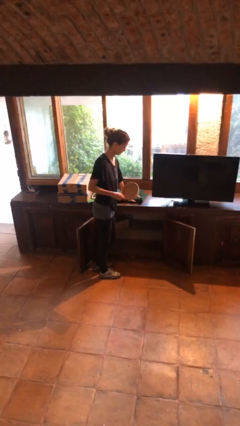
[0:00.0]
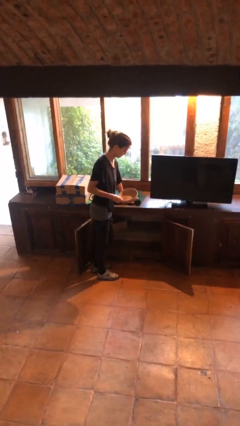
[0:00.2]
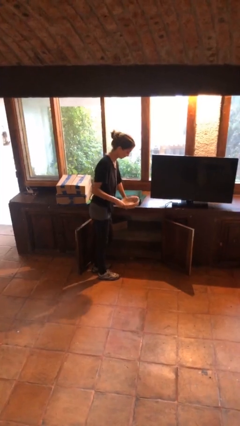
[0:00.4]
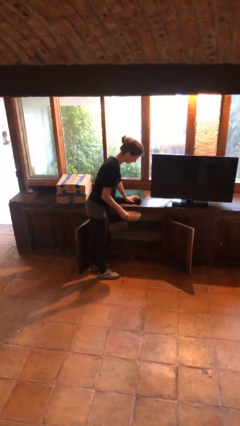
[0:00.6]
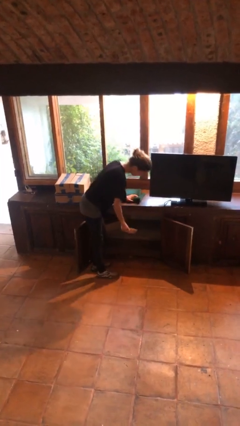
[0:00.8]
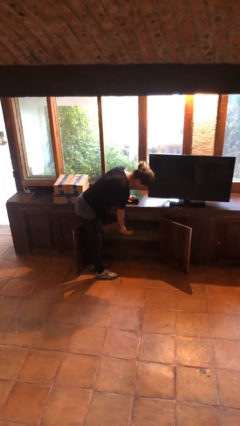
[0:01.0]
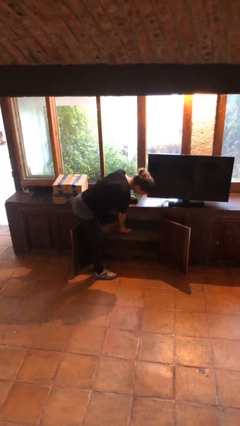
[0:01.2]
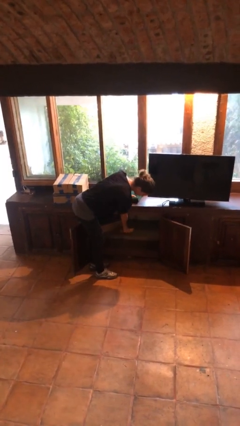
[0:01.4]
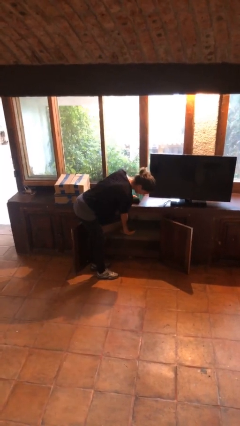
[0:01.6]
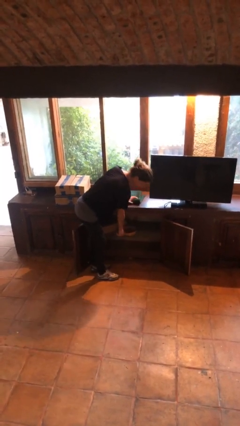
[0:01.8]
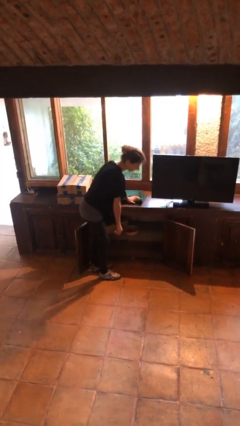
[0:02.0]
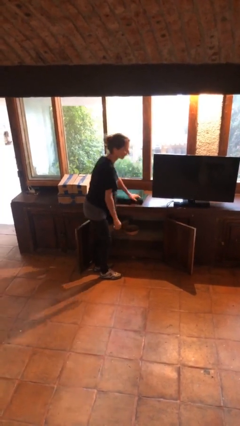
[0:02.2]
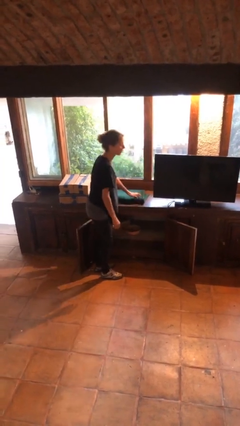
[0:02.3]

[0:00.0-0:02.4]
person puts down object into cabinet

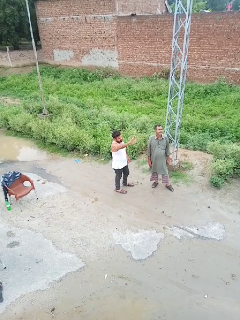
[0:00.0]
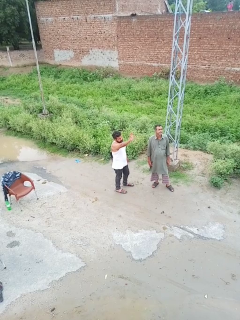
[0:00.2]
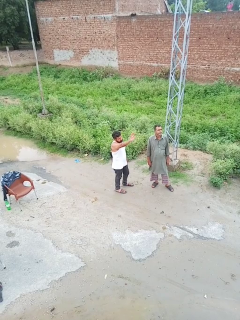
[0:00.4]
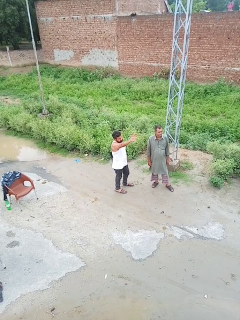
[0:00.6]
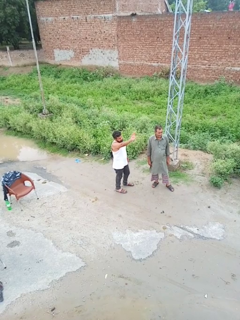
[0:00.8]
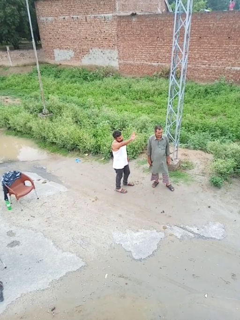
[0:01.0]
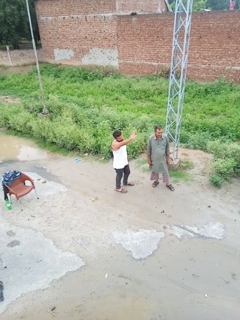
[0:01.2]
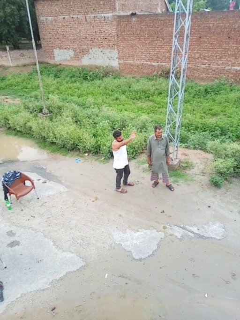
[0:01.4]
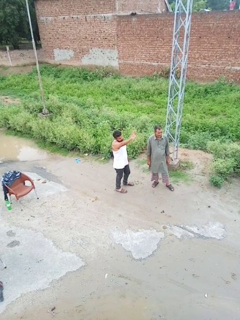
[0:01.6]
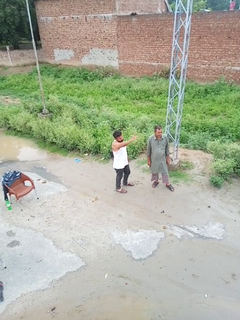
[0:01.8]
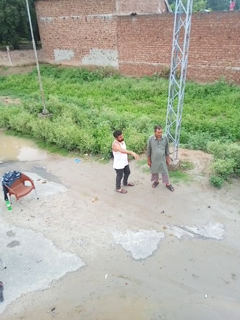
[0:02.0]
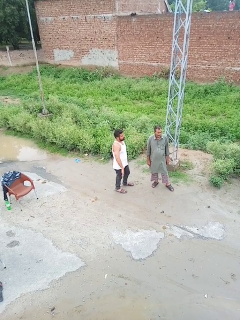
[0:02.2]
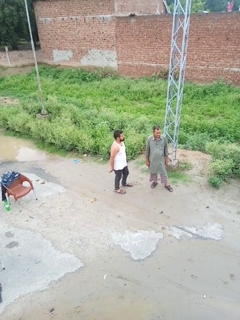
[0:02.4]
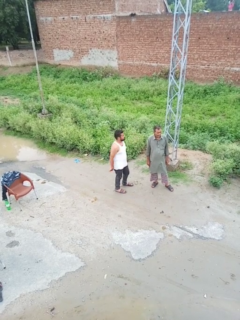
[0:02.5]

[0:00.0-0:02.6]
person waves at person

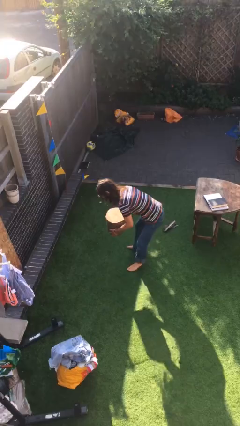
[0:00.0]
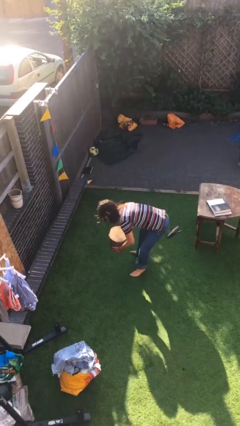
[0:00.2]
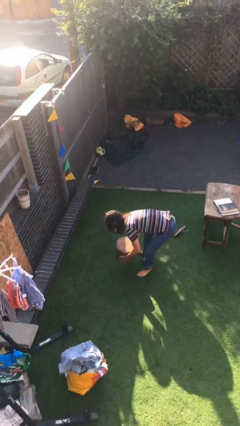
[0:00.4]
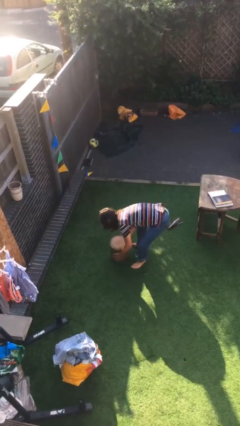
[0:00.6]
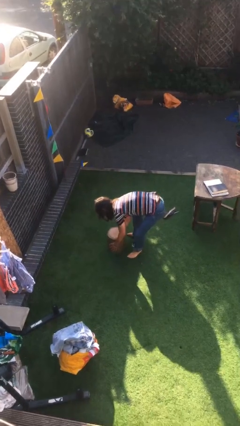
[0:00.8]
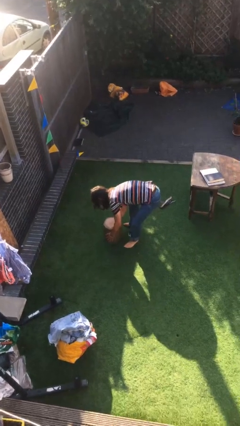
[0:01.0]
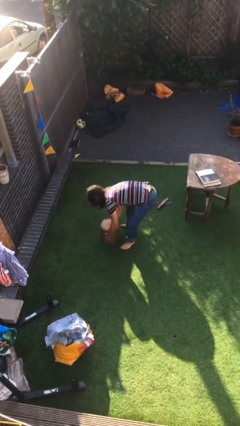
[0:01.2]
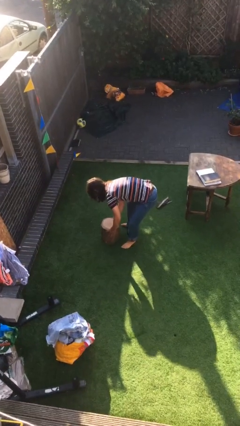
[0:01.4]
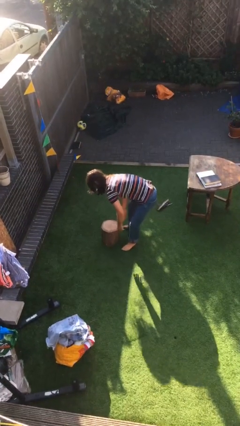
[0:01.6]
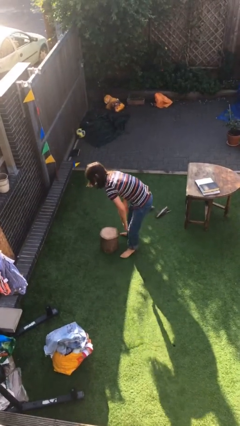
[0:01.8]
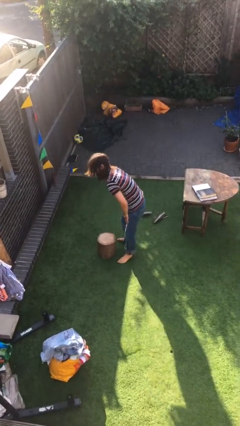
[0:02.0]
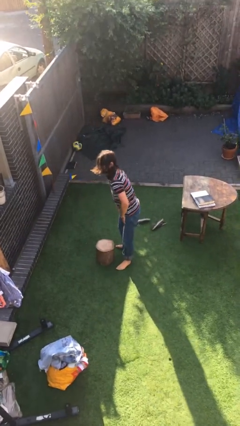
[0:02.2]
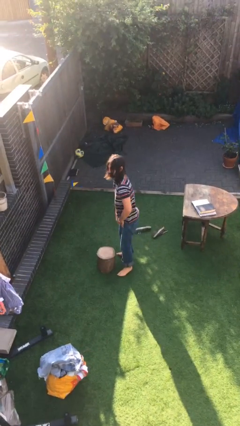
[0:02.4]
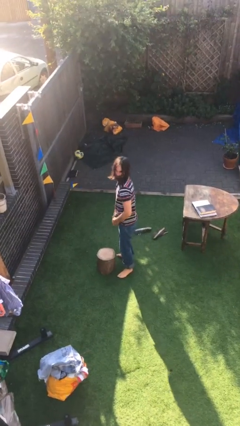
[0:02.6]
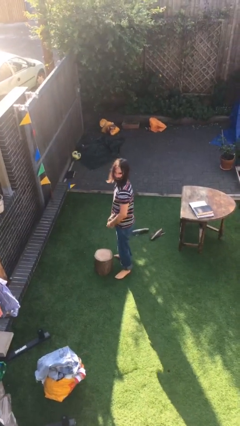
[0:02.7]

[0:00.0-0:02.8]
person puts down object on floor

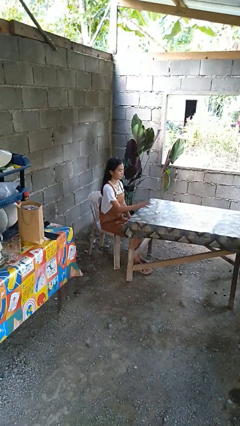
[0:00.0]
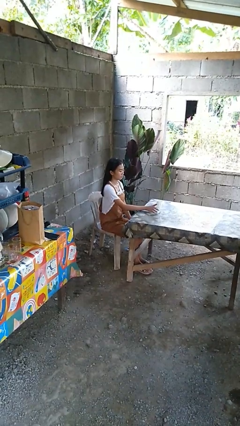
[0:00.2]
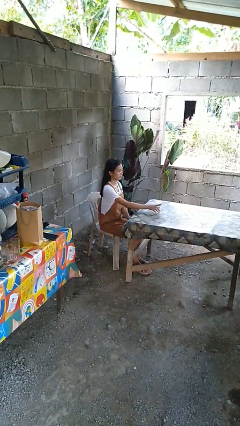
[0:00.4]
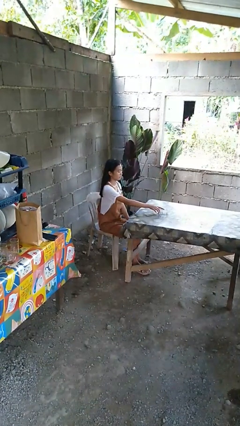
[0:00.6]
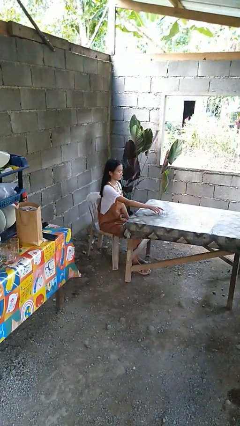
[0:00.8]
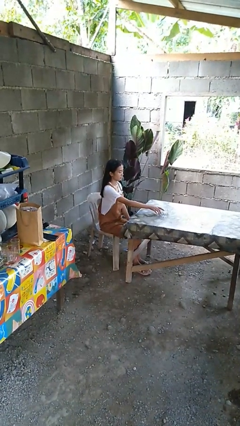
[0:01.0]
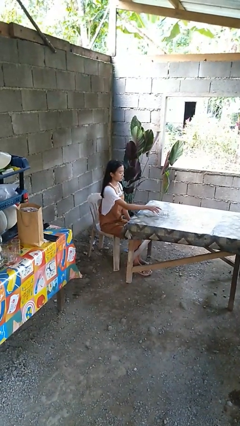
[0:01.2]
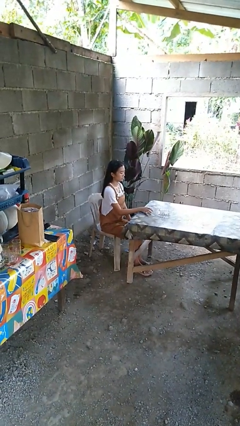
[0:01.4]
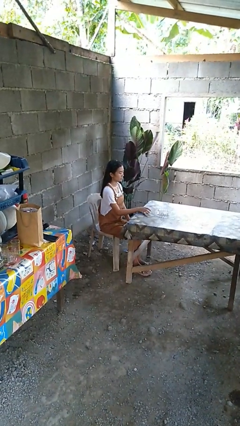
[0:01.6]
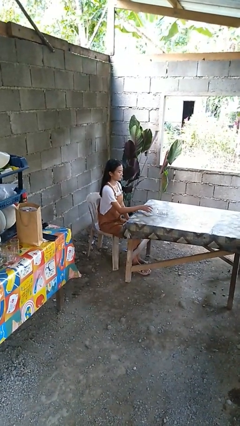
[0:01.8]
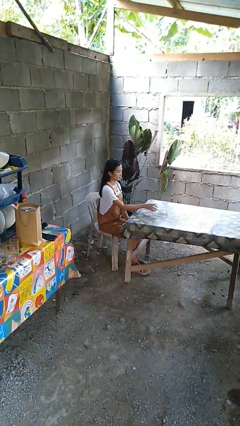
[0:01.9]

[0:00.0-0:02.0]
person knocks over glass

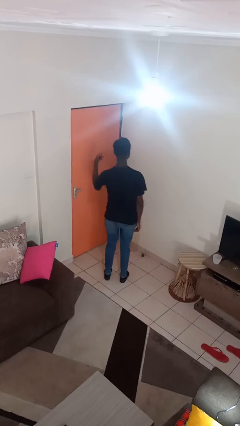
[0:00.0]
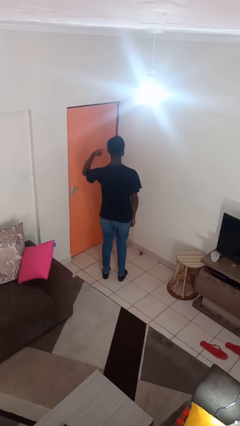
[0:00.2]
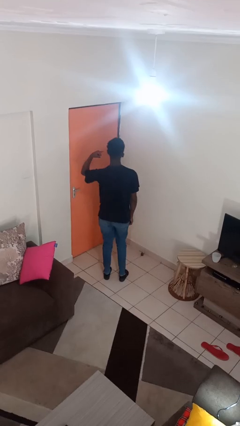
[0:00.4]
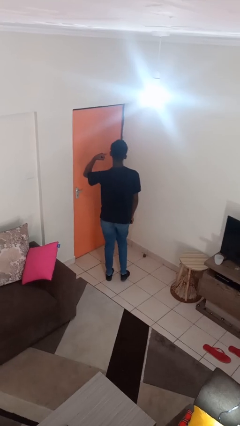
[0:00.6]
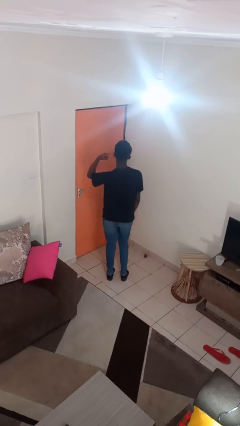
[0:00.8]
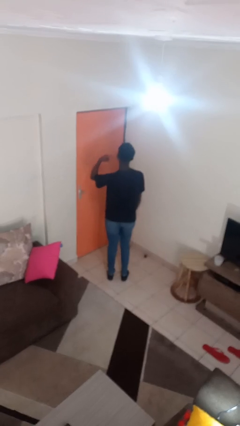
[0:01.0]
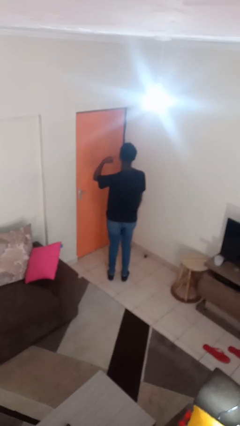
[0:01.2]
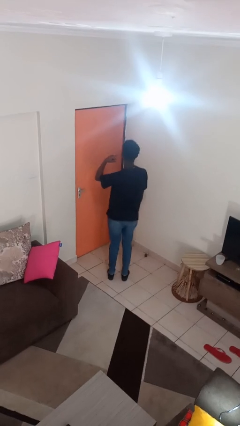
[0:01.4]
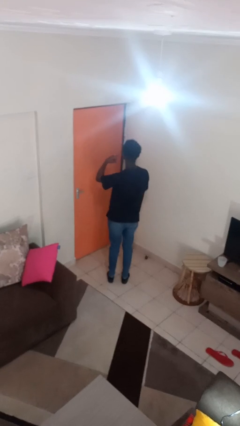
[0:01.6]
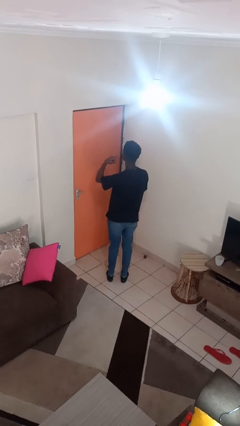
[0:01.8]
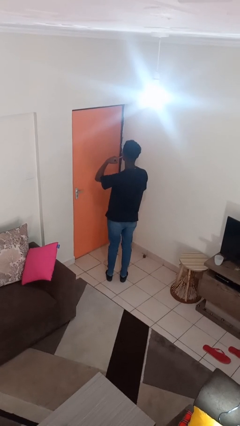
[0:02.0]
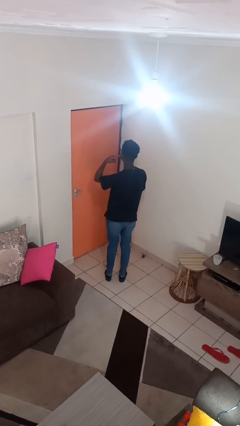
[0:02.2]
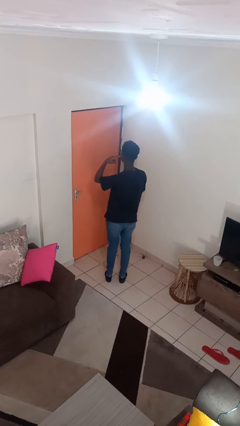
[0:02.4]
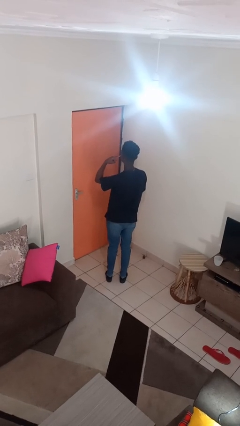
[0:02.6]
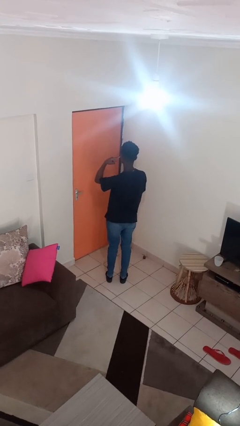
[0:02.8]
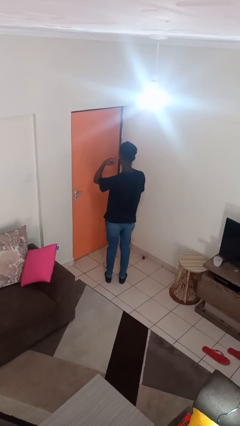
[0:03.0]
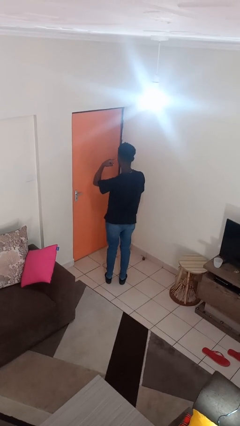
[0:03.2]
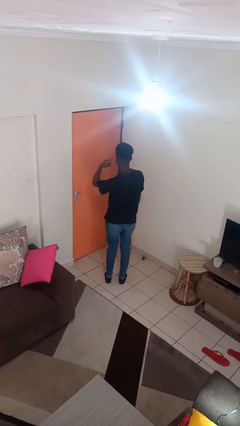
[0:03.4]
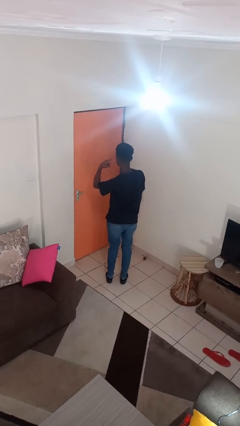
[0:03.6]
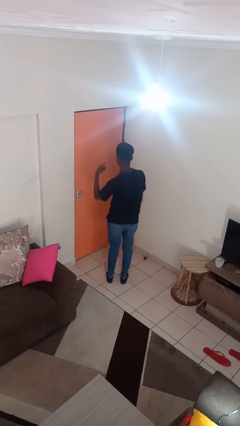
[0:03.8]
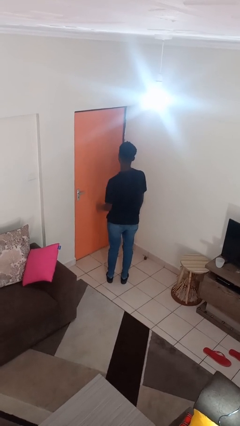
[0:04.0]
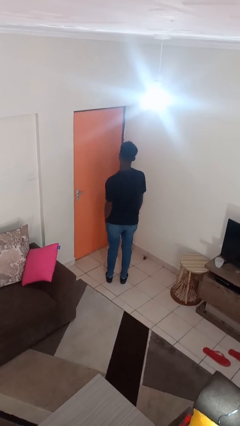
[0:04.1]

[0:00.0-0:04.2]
person gestures listen closely

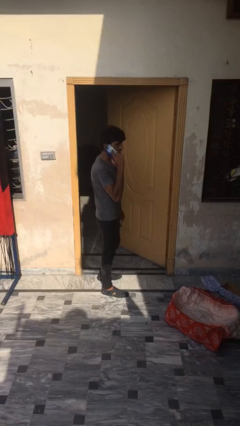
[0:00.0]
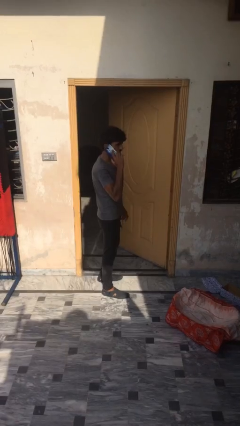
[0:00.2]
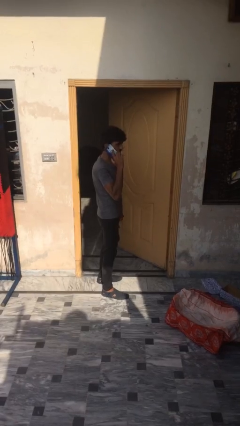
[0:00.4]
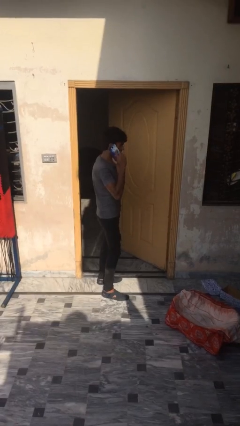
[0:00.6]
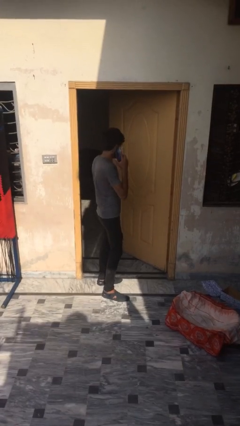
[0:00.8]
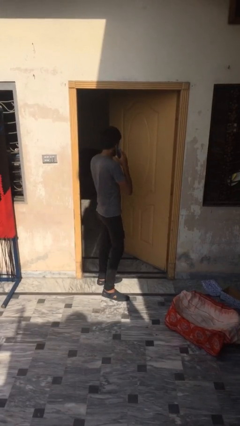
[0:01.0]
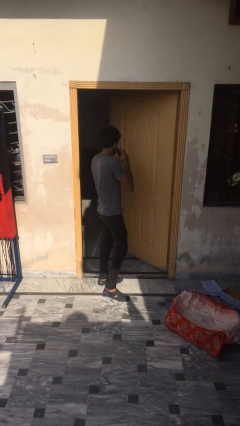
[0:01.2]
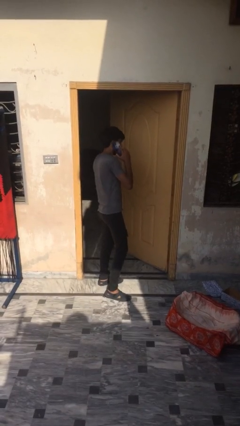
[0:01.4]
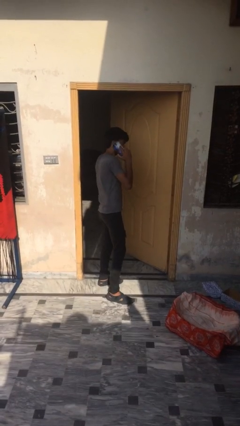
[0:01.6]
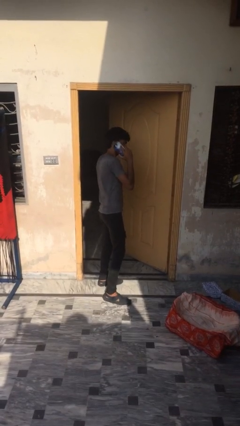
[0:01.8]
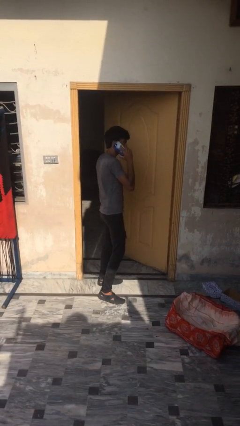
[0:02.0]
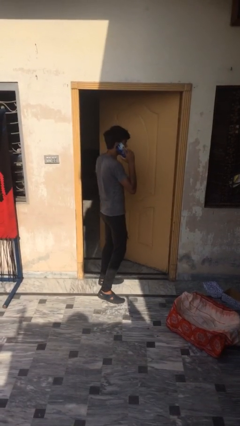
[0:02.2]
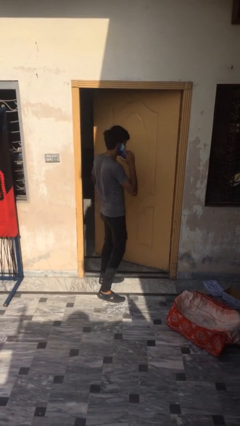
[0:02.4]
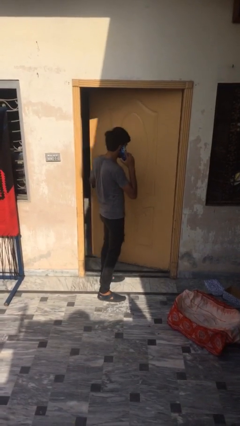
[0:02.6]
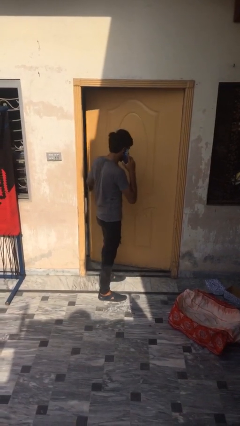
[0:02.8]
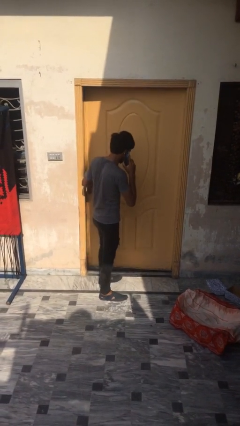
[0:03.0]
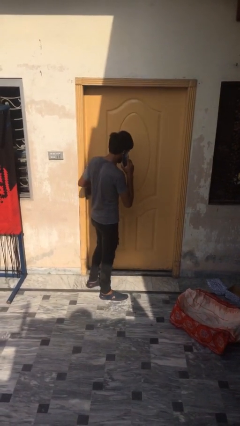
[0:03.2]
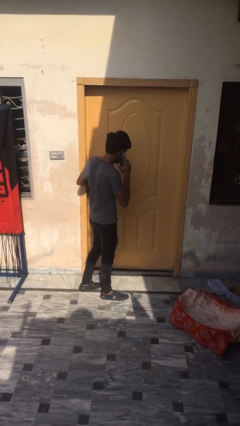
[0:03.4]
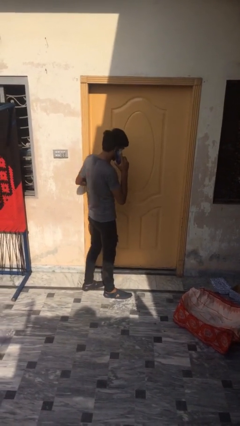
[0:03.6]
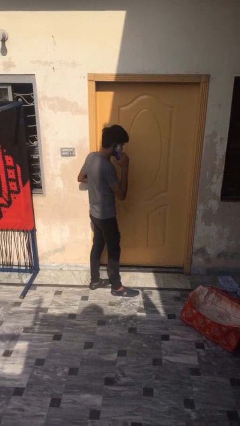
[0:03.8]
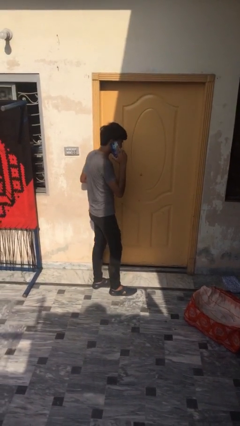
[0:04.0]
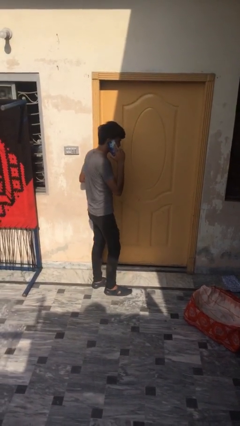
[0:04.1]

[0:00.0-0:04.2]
person closes facility door
